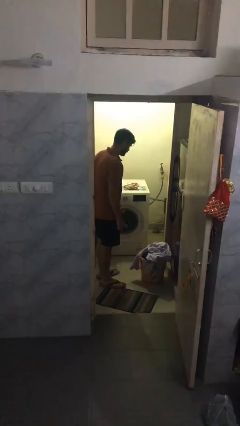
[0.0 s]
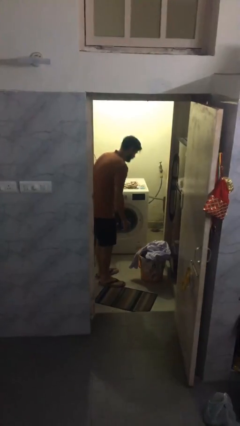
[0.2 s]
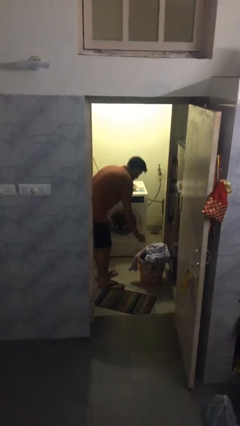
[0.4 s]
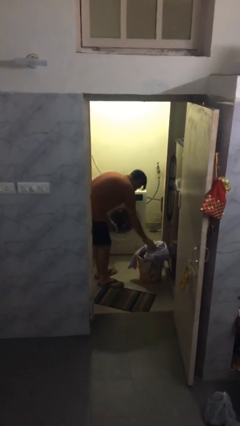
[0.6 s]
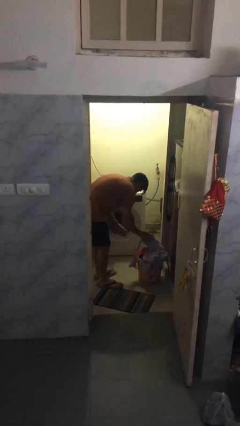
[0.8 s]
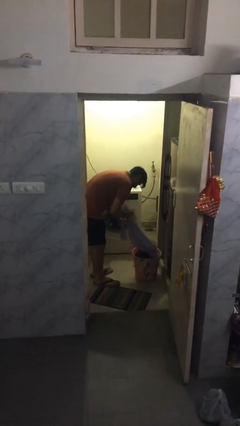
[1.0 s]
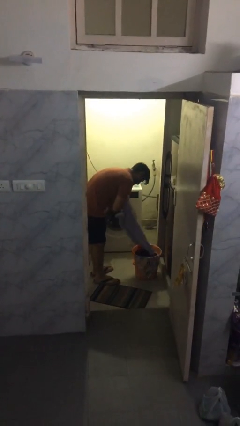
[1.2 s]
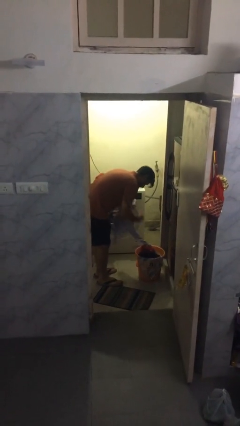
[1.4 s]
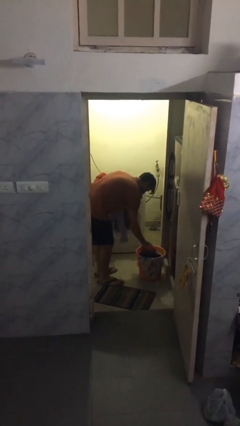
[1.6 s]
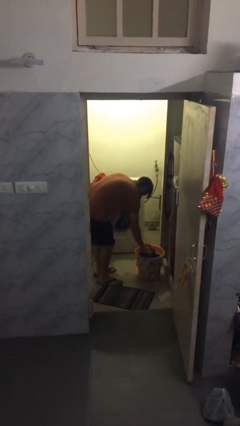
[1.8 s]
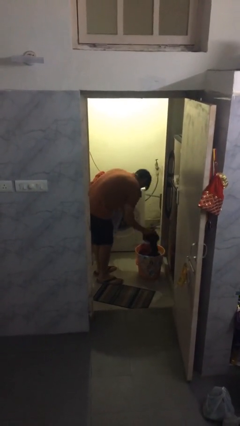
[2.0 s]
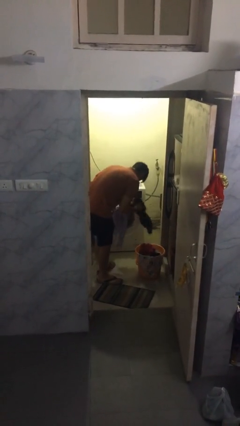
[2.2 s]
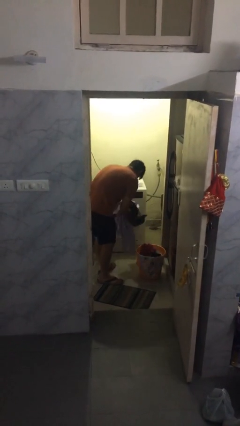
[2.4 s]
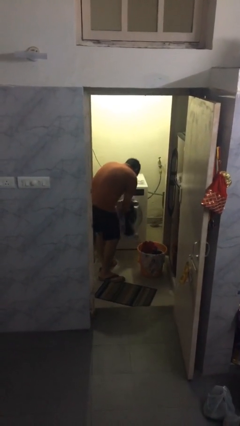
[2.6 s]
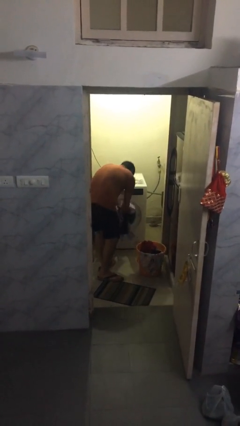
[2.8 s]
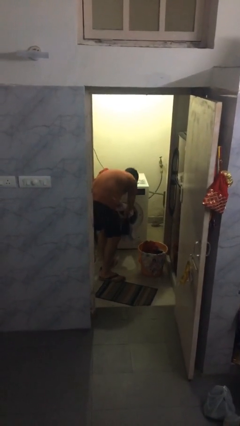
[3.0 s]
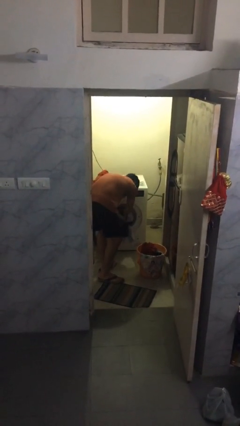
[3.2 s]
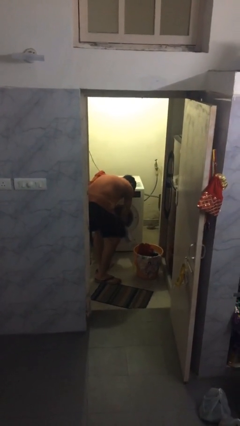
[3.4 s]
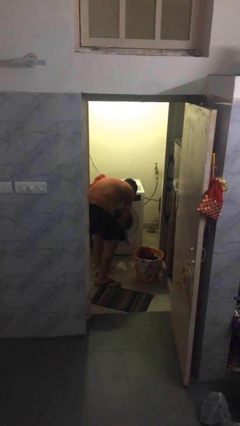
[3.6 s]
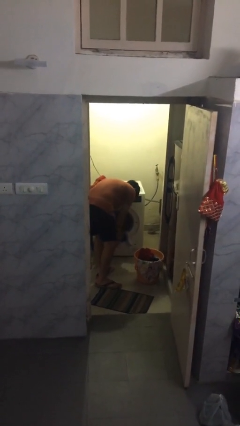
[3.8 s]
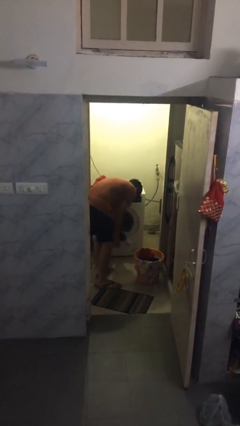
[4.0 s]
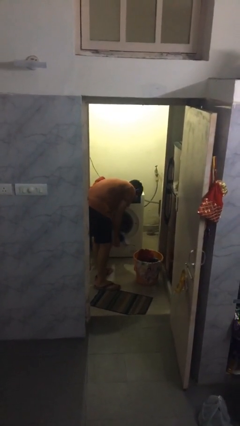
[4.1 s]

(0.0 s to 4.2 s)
person loads dryer

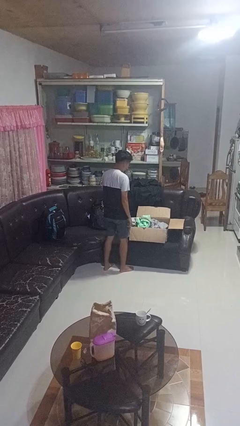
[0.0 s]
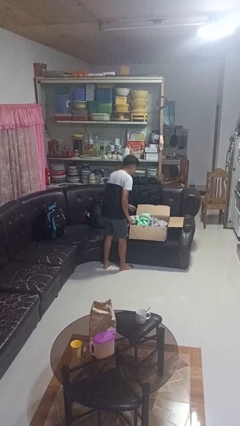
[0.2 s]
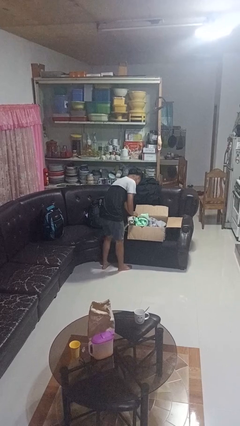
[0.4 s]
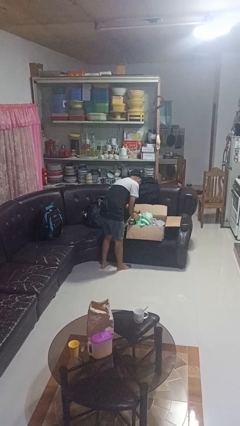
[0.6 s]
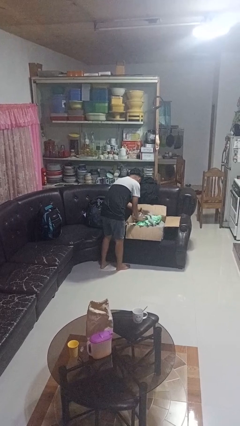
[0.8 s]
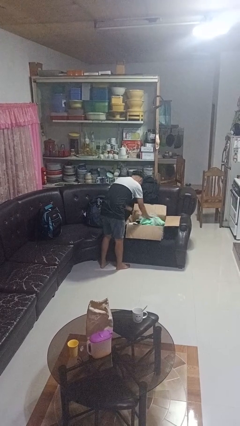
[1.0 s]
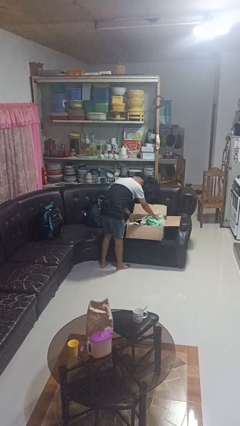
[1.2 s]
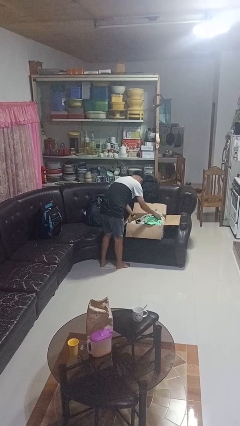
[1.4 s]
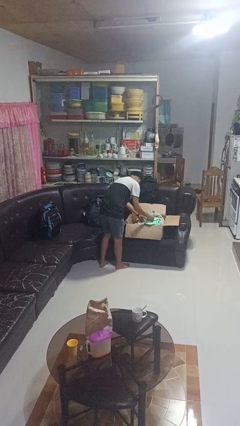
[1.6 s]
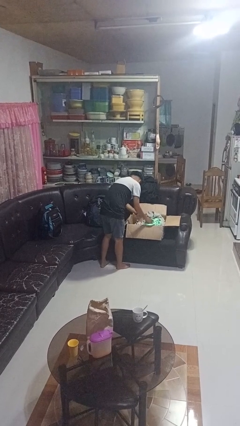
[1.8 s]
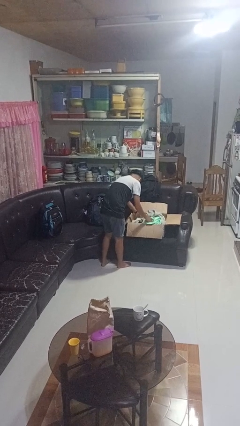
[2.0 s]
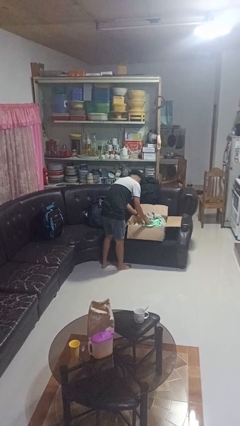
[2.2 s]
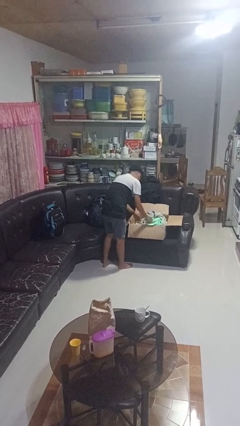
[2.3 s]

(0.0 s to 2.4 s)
person searches in box

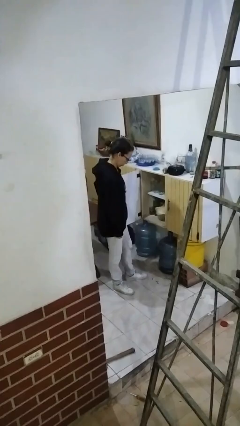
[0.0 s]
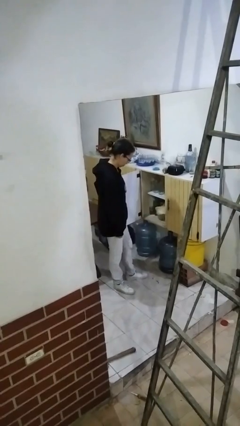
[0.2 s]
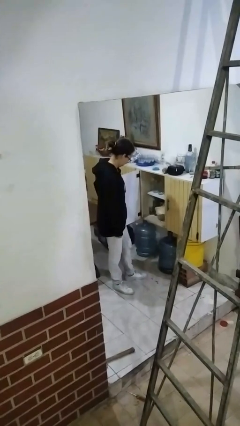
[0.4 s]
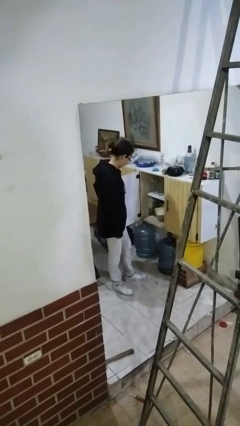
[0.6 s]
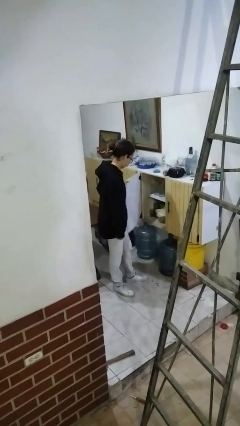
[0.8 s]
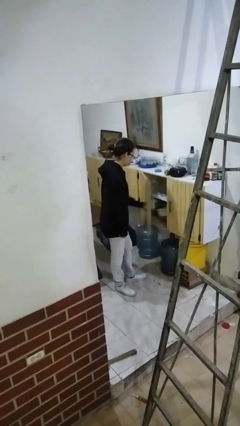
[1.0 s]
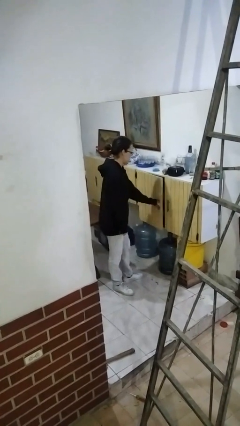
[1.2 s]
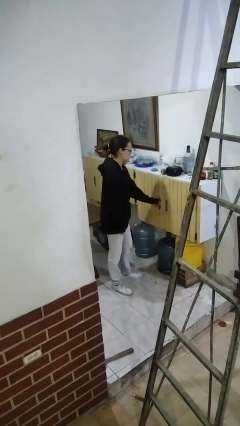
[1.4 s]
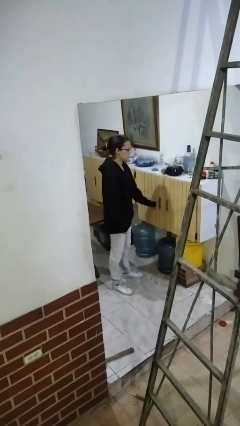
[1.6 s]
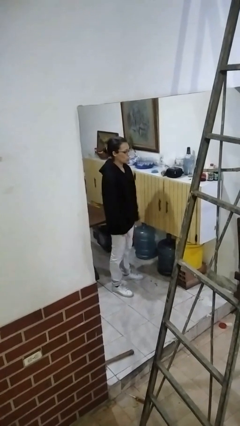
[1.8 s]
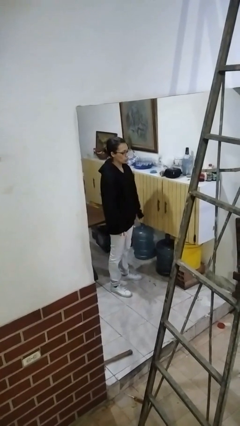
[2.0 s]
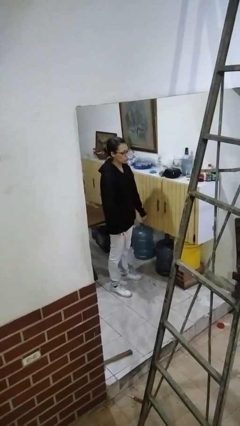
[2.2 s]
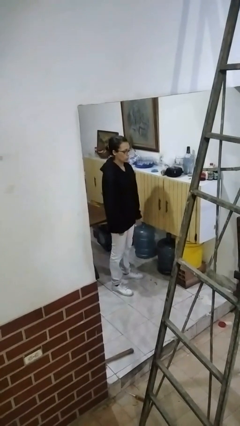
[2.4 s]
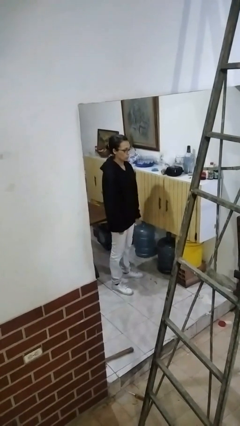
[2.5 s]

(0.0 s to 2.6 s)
person closes cabinet

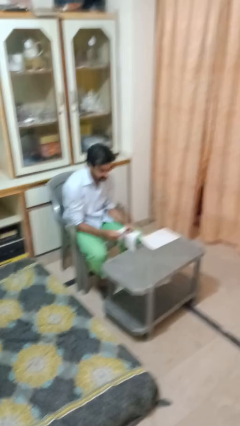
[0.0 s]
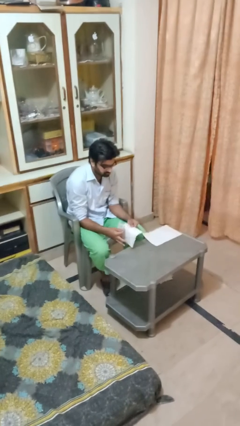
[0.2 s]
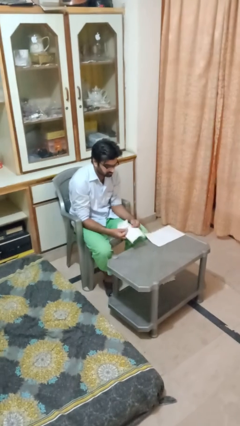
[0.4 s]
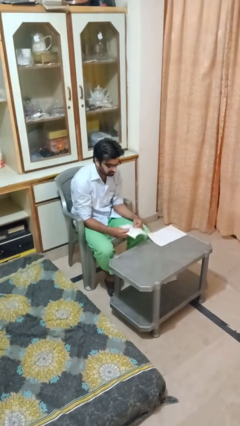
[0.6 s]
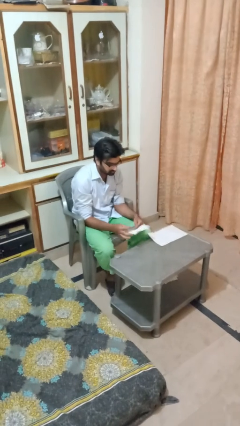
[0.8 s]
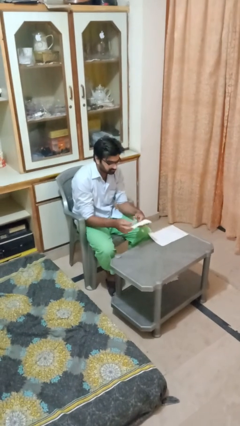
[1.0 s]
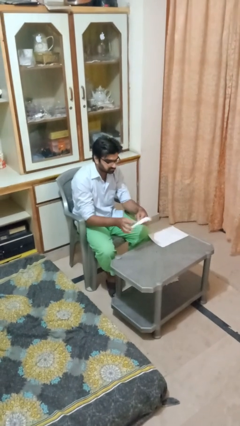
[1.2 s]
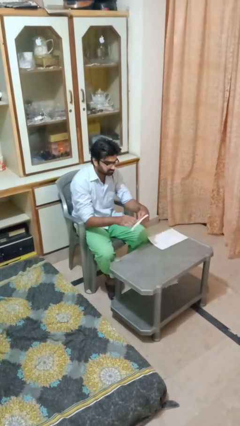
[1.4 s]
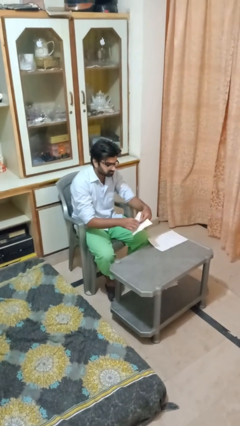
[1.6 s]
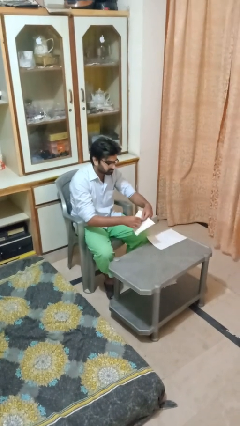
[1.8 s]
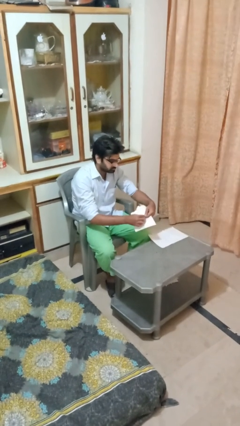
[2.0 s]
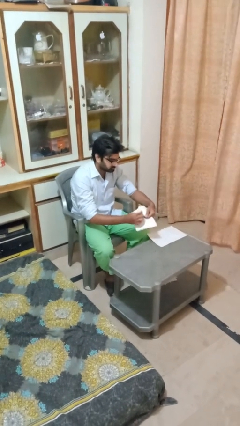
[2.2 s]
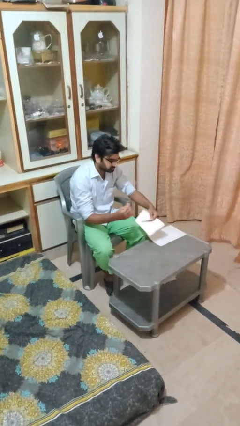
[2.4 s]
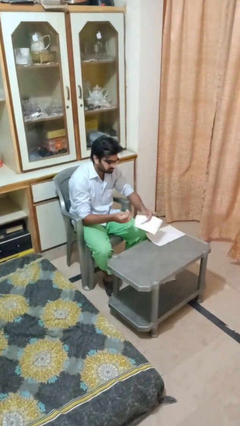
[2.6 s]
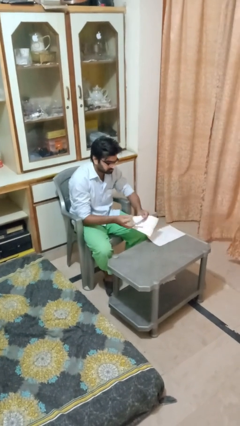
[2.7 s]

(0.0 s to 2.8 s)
person tears paper

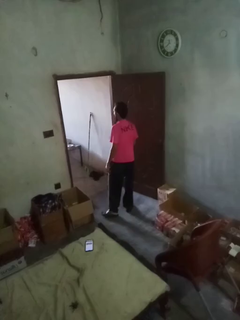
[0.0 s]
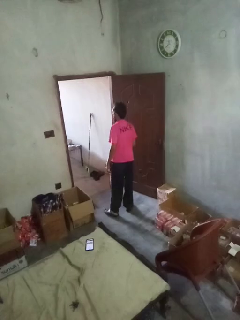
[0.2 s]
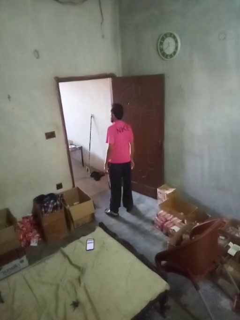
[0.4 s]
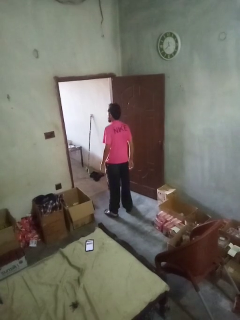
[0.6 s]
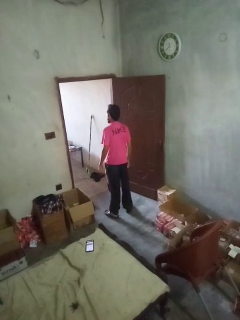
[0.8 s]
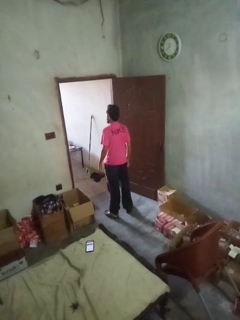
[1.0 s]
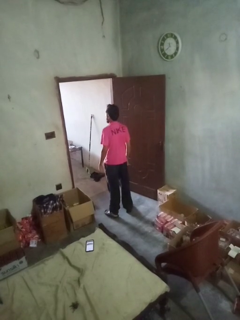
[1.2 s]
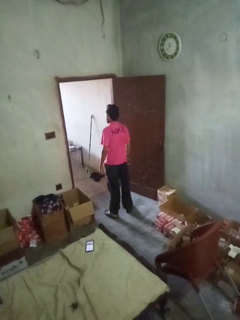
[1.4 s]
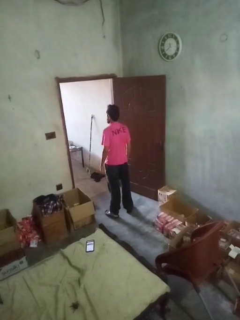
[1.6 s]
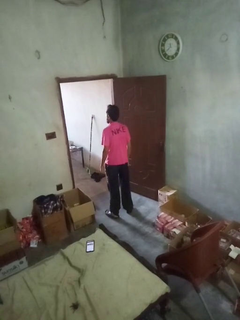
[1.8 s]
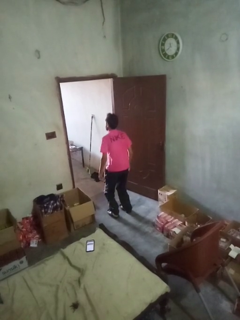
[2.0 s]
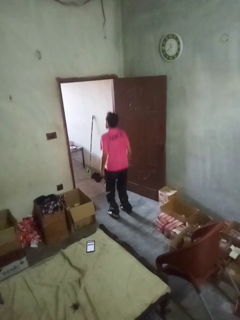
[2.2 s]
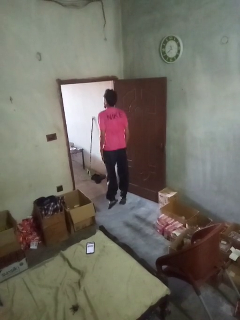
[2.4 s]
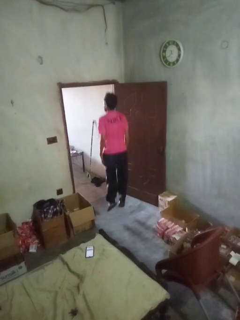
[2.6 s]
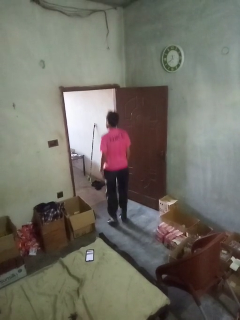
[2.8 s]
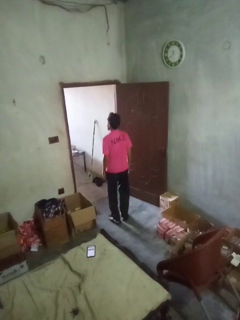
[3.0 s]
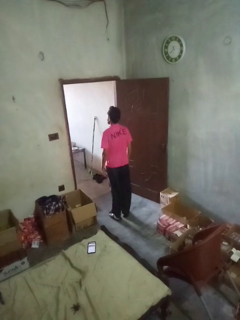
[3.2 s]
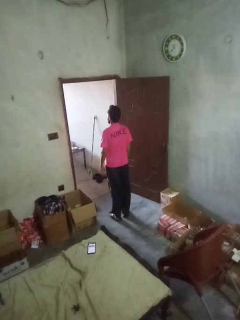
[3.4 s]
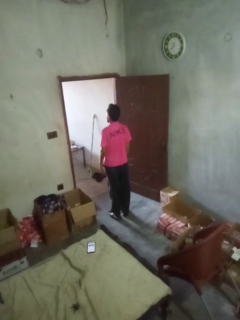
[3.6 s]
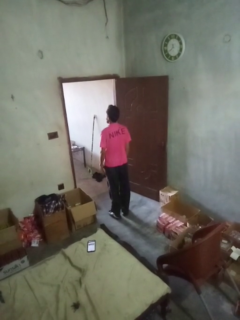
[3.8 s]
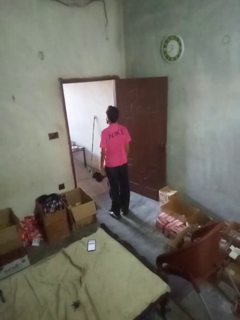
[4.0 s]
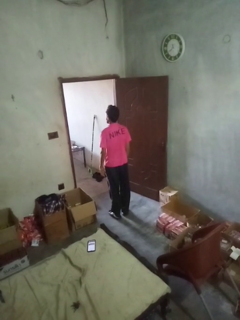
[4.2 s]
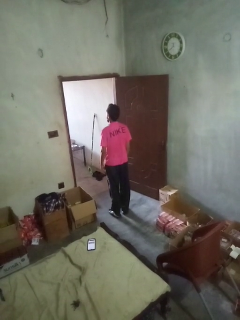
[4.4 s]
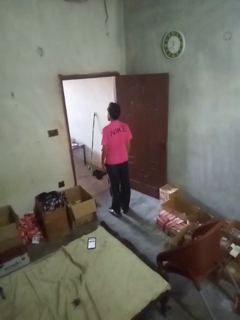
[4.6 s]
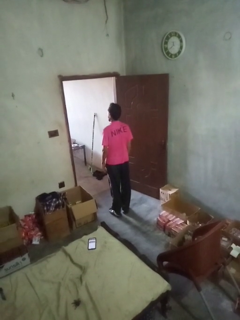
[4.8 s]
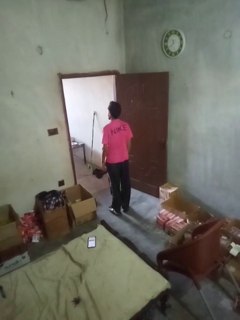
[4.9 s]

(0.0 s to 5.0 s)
person jumps

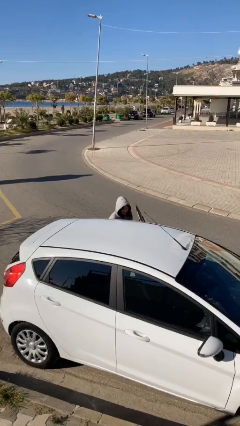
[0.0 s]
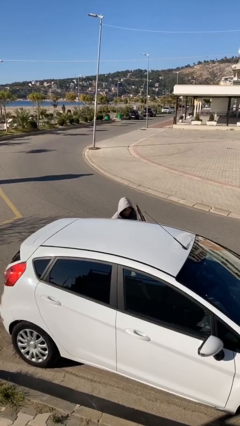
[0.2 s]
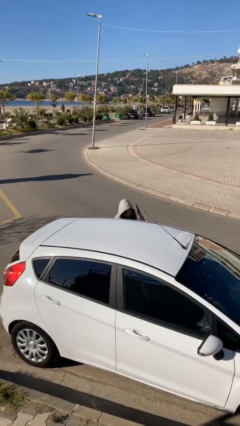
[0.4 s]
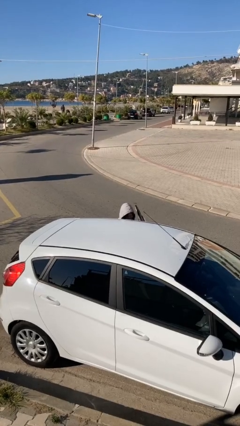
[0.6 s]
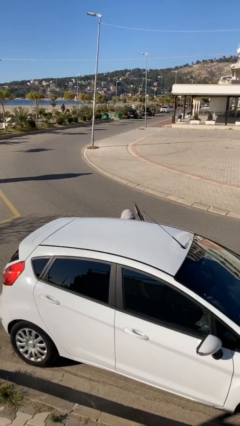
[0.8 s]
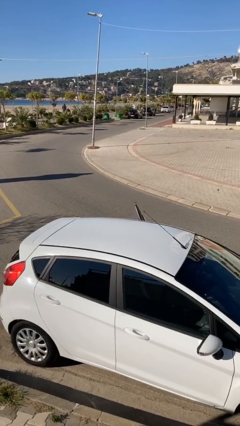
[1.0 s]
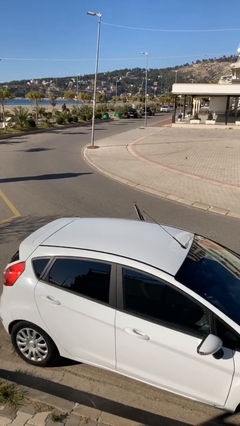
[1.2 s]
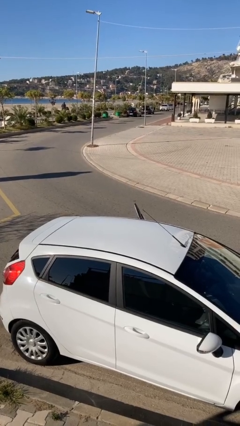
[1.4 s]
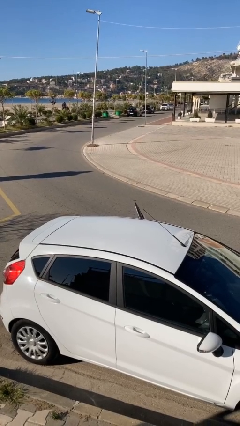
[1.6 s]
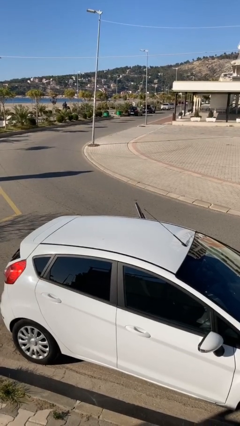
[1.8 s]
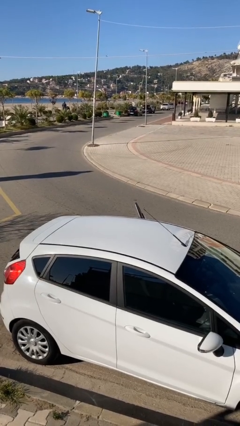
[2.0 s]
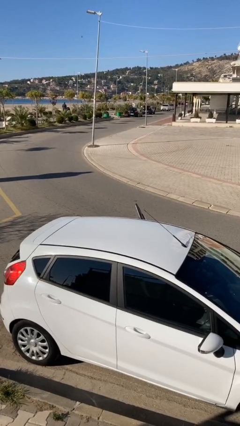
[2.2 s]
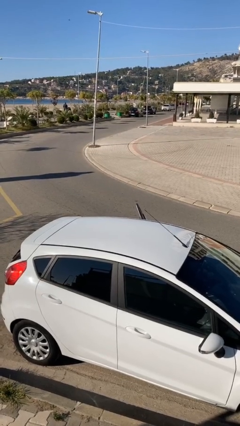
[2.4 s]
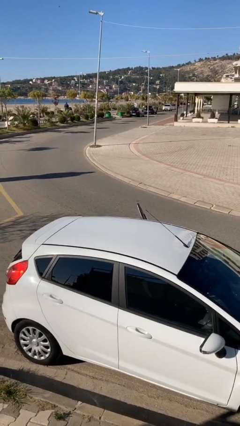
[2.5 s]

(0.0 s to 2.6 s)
person enters car
